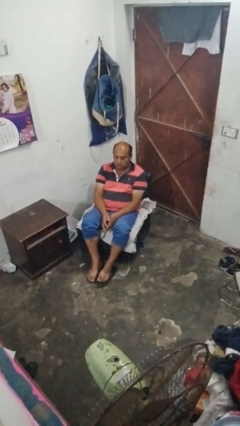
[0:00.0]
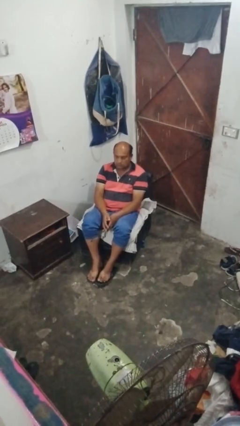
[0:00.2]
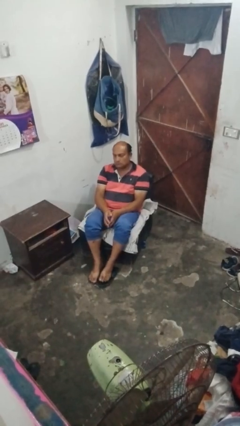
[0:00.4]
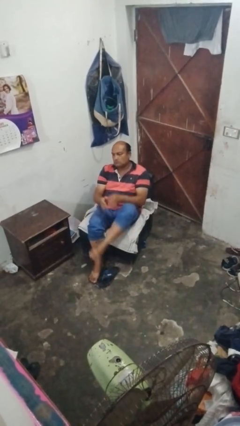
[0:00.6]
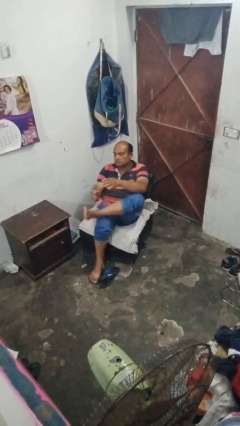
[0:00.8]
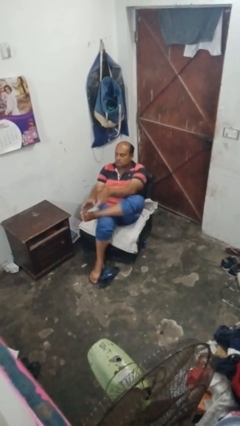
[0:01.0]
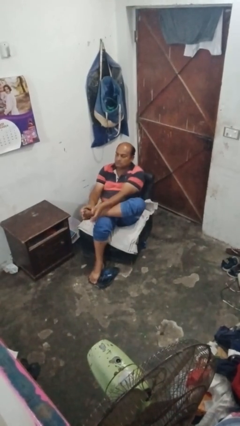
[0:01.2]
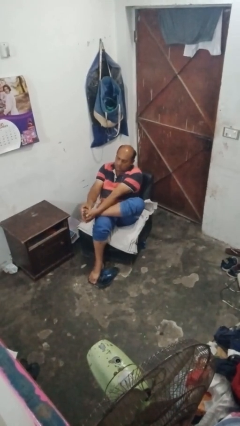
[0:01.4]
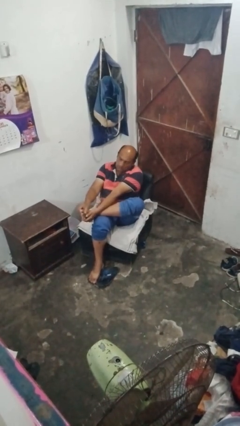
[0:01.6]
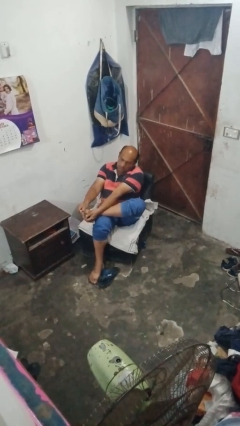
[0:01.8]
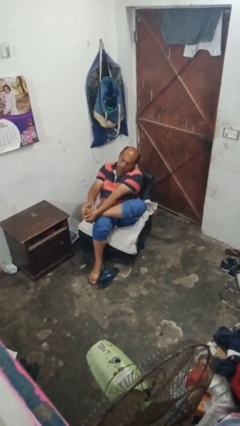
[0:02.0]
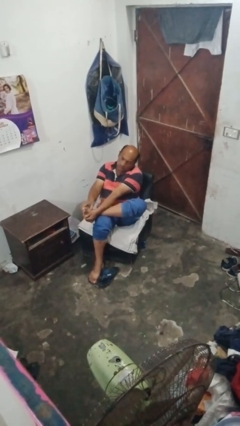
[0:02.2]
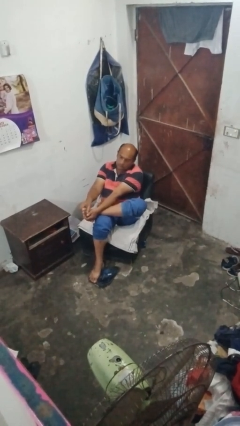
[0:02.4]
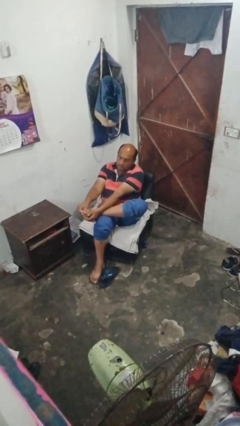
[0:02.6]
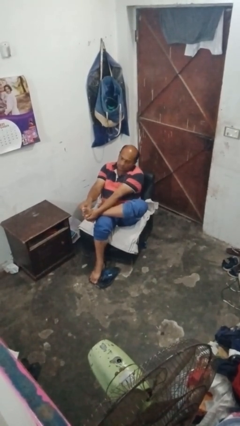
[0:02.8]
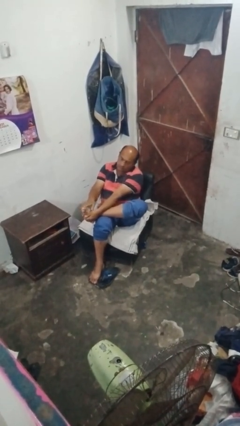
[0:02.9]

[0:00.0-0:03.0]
person rubs foot

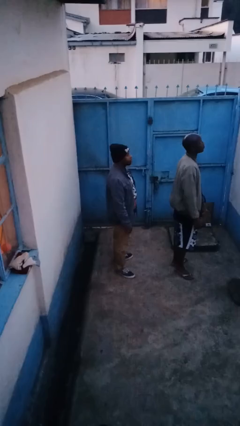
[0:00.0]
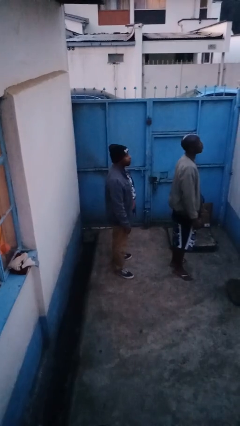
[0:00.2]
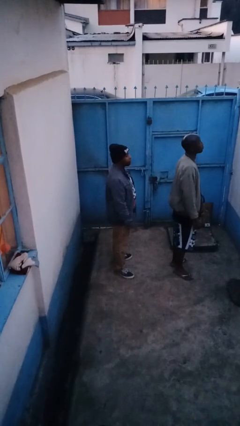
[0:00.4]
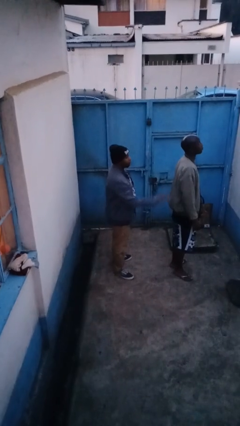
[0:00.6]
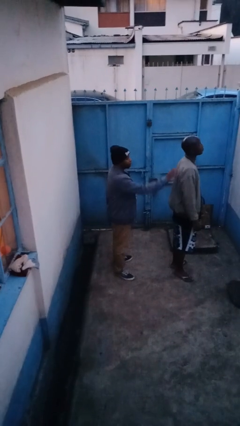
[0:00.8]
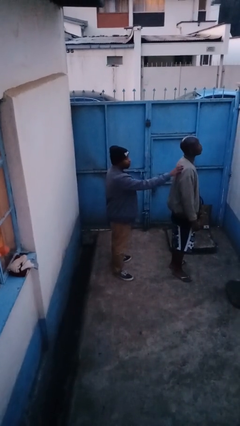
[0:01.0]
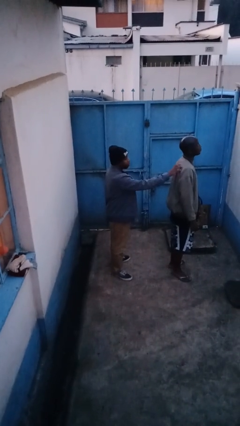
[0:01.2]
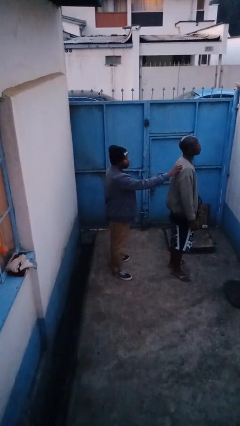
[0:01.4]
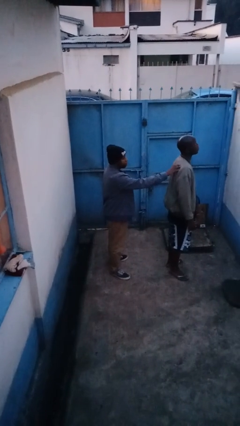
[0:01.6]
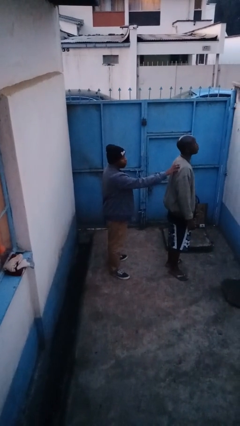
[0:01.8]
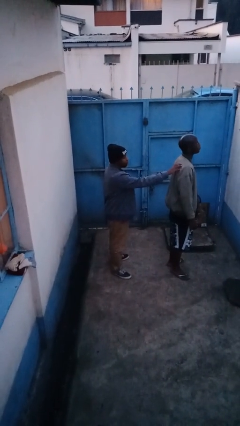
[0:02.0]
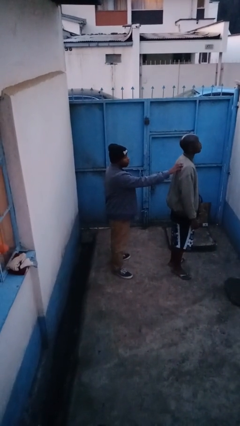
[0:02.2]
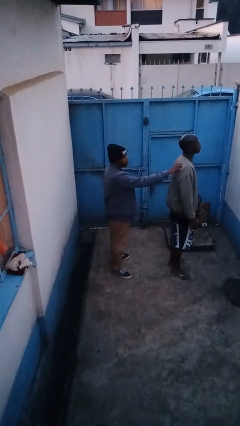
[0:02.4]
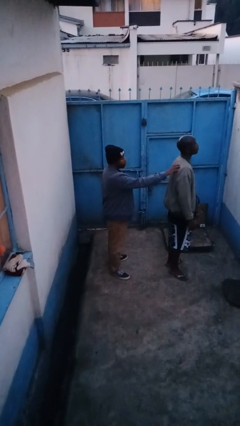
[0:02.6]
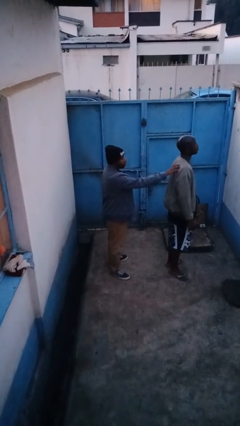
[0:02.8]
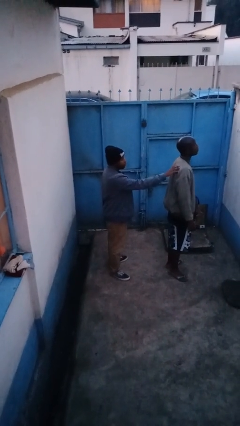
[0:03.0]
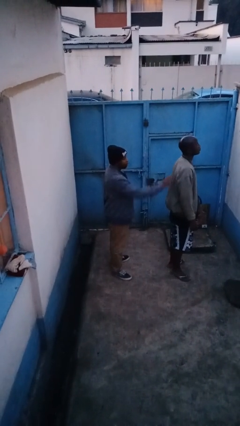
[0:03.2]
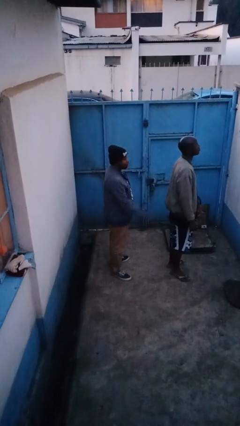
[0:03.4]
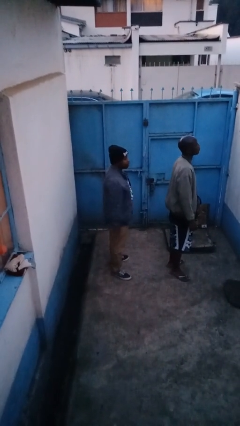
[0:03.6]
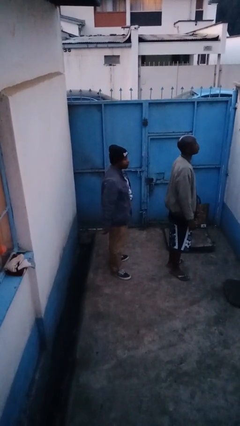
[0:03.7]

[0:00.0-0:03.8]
person touches back of person

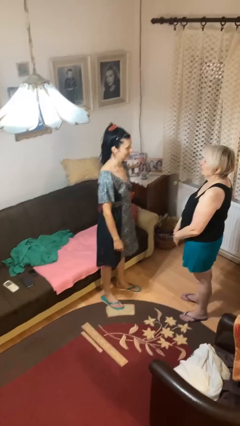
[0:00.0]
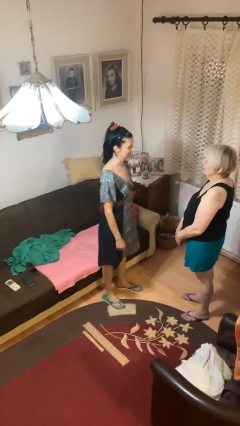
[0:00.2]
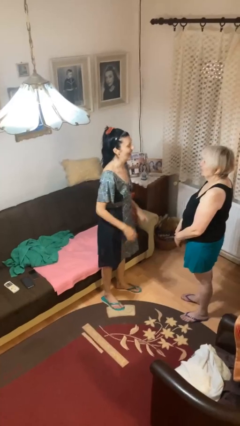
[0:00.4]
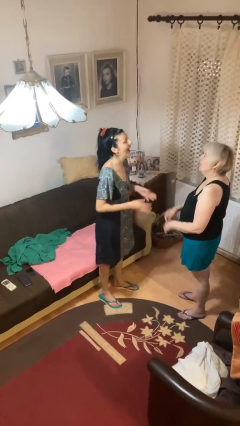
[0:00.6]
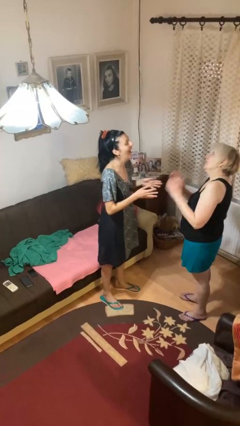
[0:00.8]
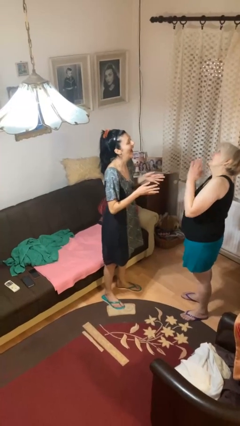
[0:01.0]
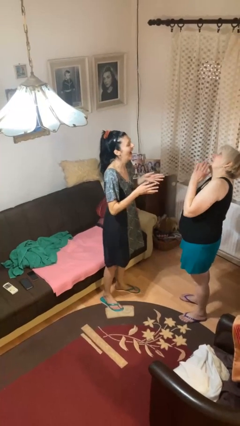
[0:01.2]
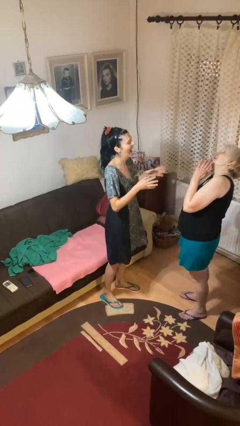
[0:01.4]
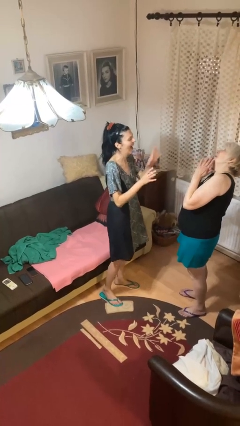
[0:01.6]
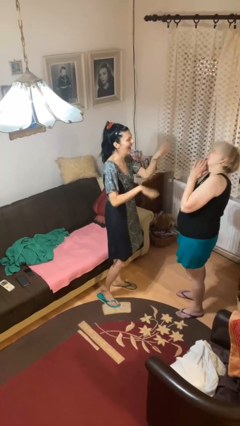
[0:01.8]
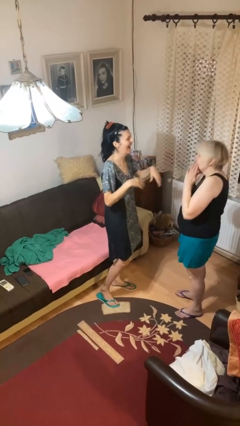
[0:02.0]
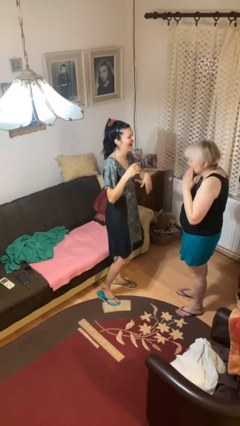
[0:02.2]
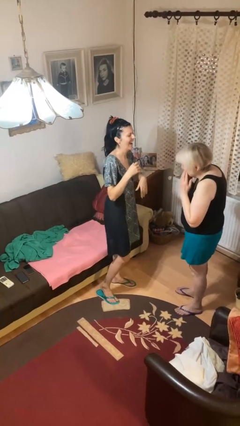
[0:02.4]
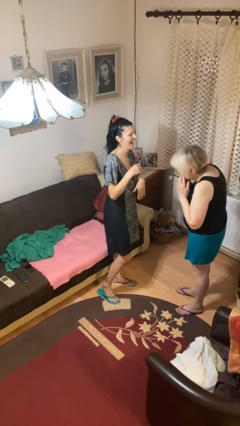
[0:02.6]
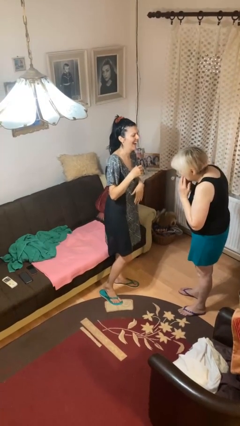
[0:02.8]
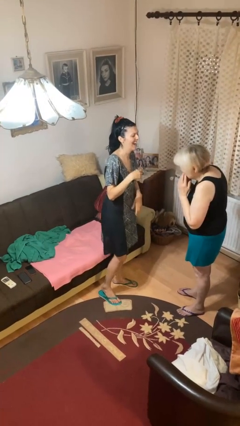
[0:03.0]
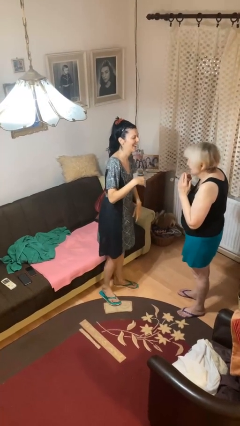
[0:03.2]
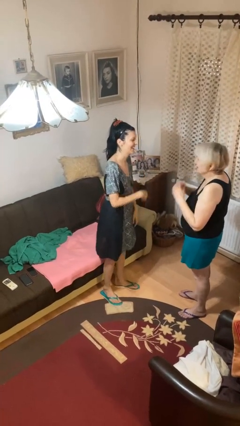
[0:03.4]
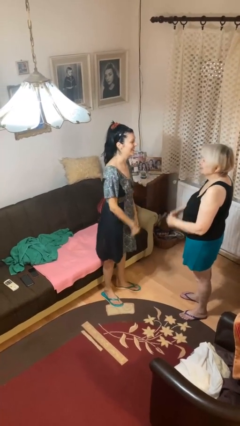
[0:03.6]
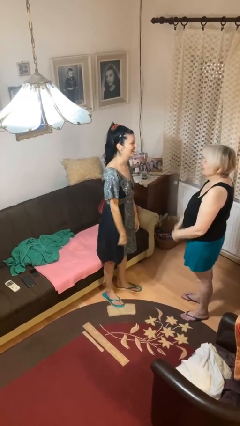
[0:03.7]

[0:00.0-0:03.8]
person laughs with person

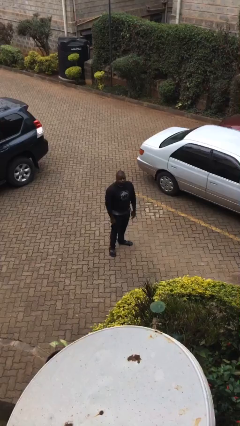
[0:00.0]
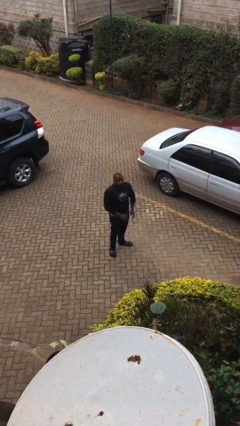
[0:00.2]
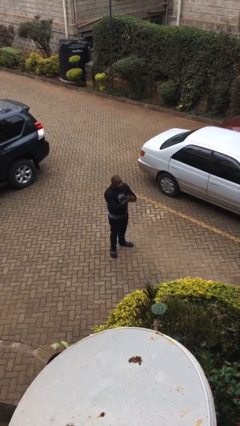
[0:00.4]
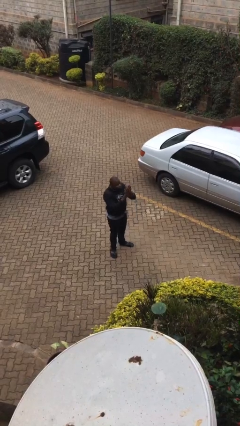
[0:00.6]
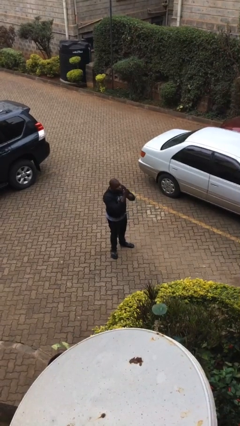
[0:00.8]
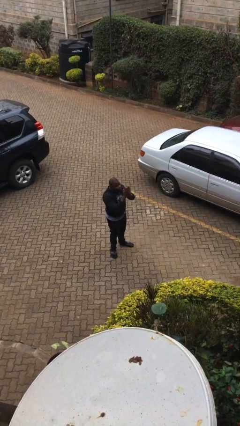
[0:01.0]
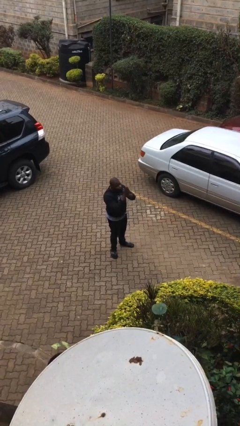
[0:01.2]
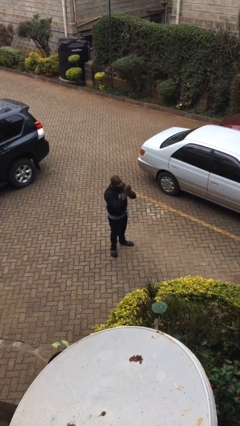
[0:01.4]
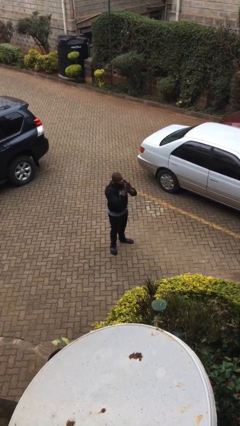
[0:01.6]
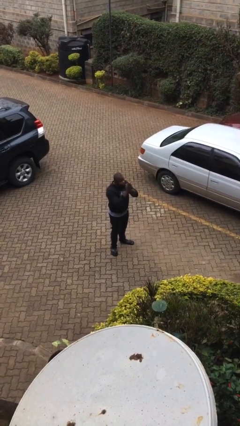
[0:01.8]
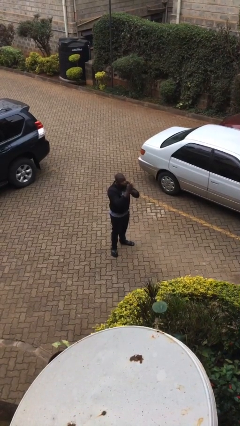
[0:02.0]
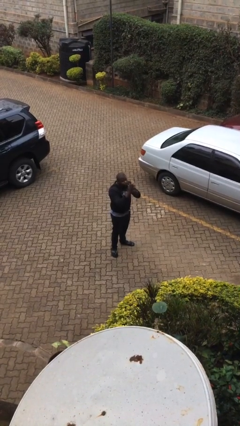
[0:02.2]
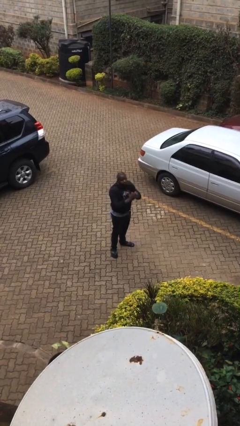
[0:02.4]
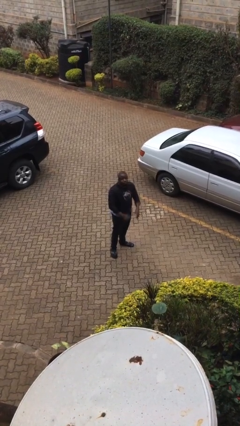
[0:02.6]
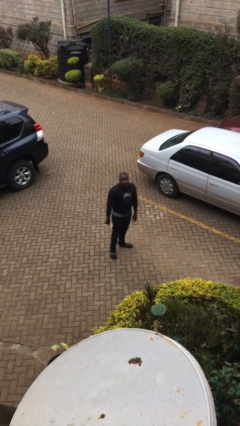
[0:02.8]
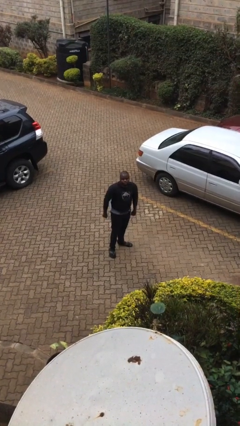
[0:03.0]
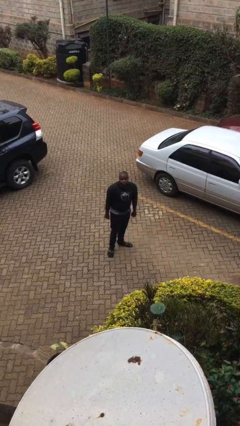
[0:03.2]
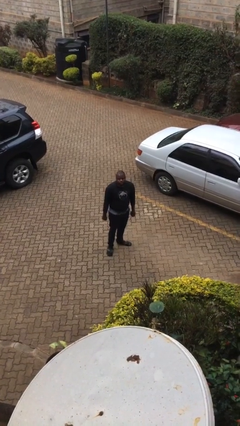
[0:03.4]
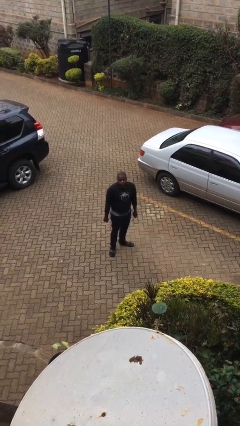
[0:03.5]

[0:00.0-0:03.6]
person blows into hands

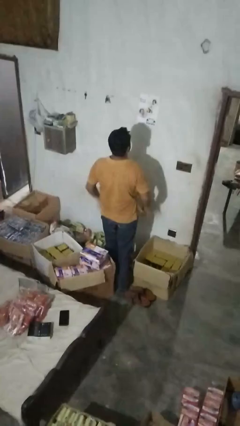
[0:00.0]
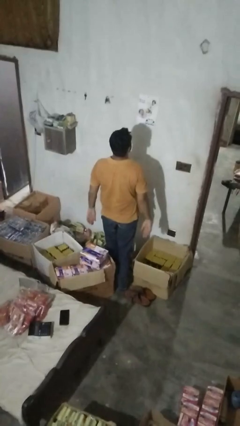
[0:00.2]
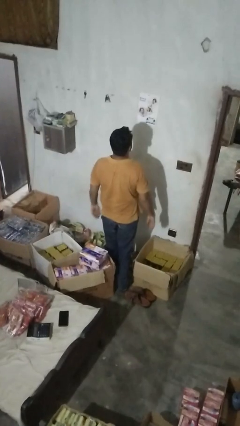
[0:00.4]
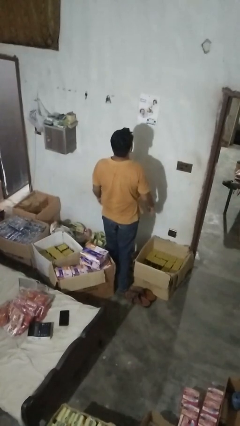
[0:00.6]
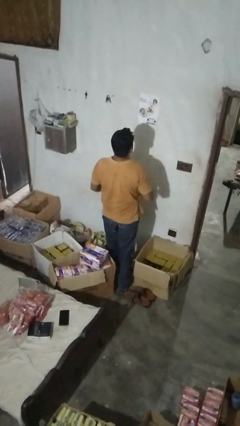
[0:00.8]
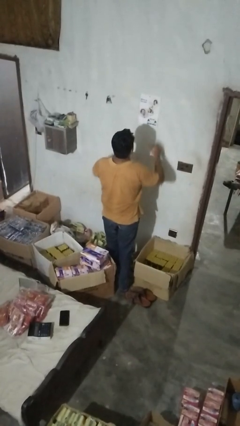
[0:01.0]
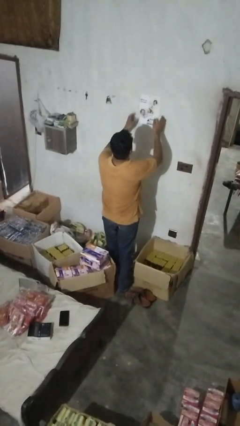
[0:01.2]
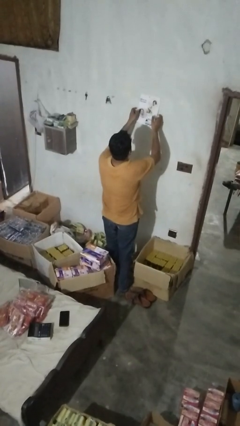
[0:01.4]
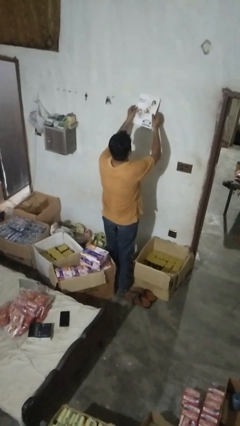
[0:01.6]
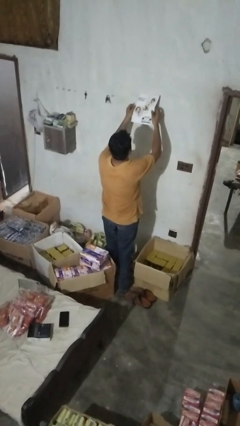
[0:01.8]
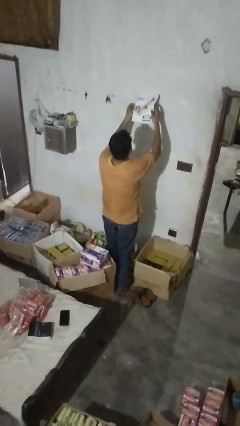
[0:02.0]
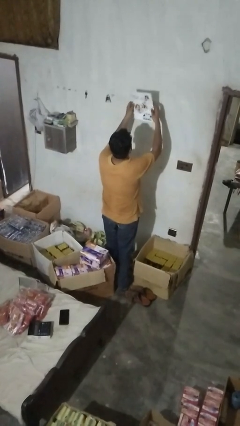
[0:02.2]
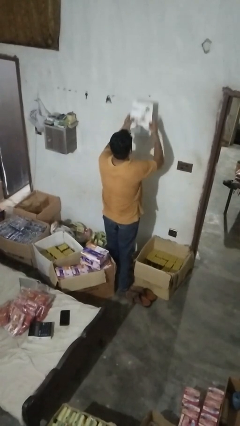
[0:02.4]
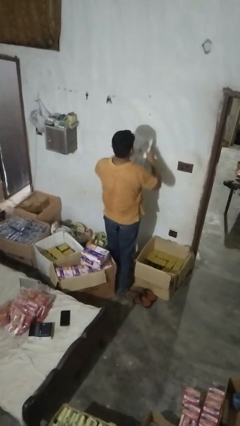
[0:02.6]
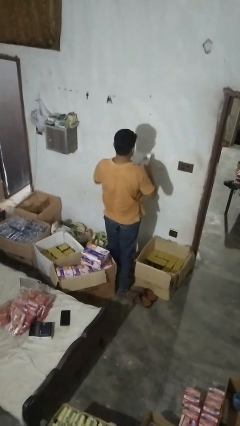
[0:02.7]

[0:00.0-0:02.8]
person takes down picture frame

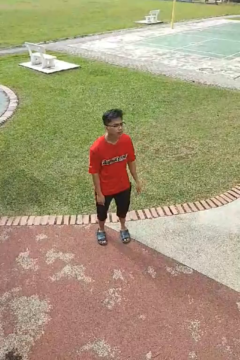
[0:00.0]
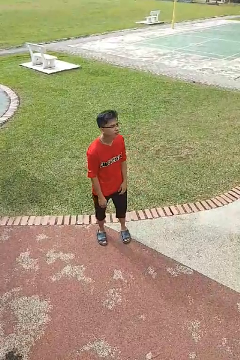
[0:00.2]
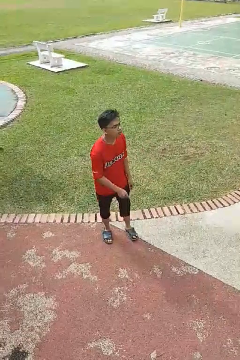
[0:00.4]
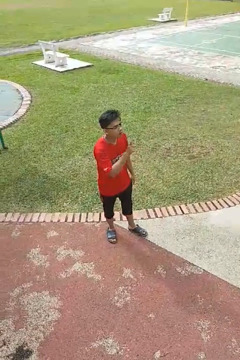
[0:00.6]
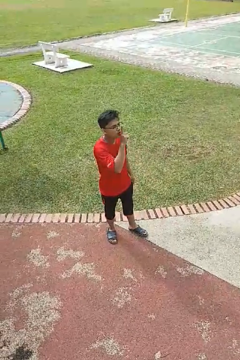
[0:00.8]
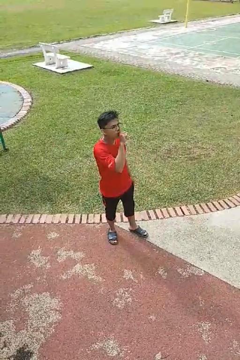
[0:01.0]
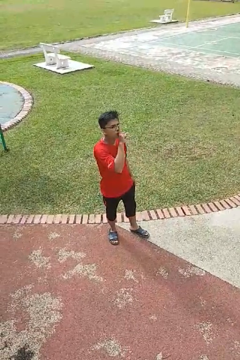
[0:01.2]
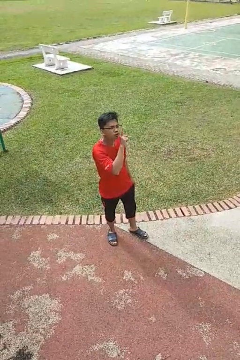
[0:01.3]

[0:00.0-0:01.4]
person gestures be quiet
